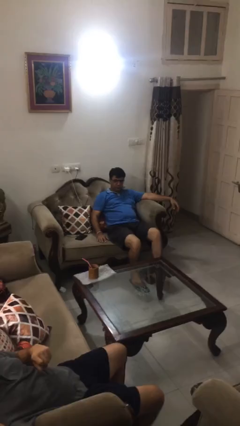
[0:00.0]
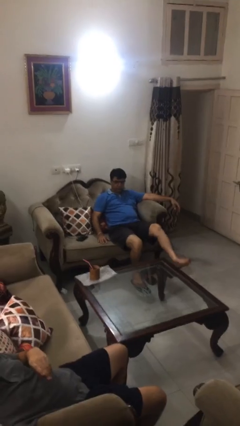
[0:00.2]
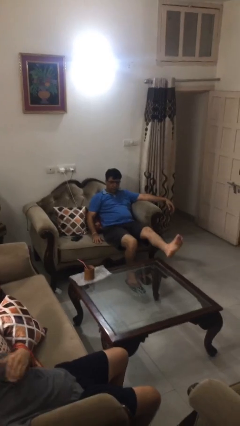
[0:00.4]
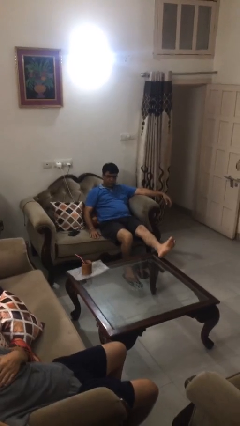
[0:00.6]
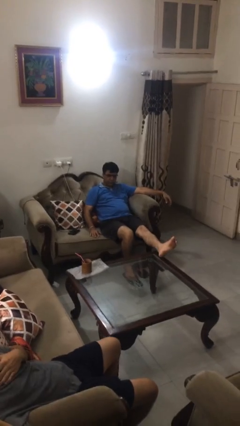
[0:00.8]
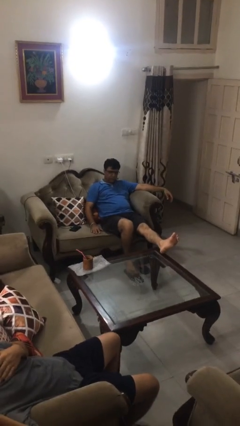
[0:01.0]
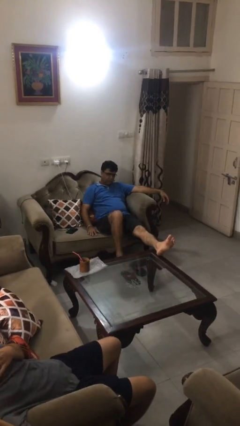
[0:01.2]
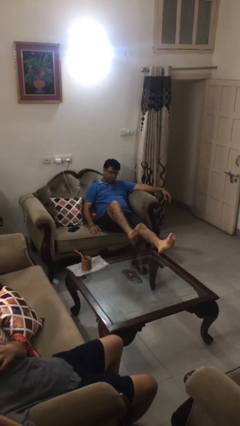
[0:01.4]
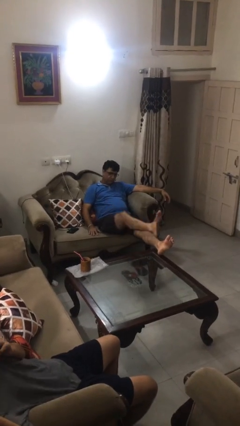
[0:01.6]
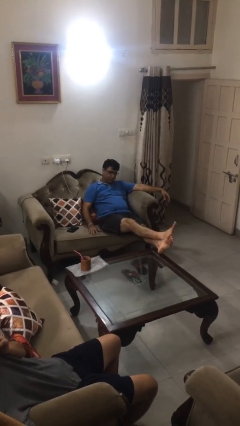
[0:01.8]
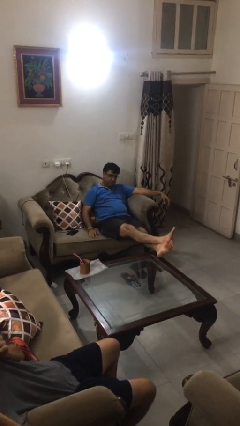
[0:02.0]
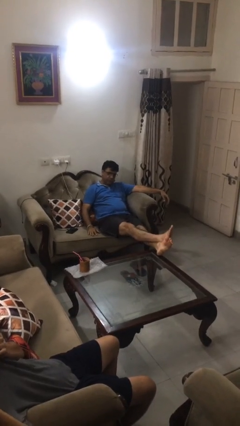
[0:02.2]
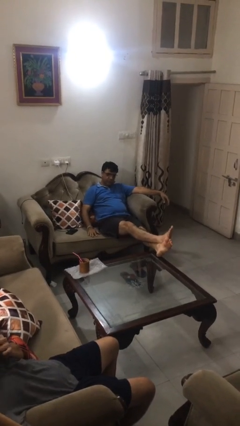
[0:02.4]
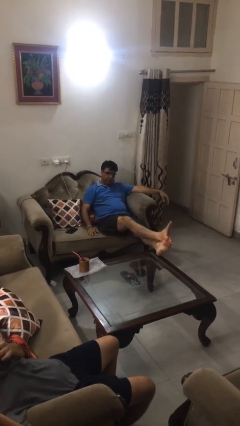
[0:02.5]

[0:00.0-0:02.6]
person puts feet up

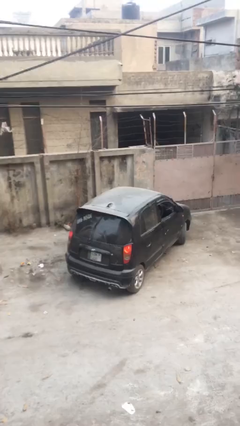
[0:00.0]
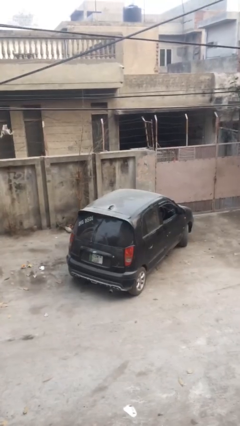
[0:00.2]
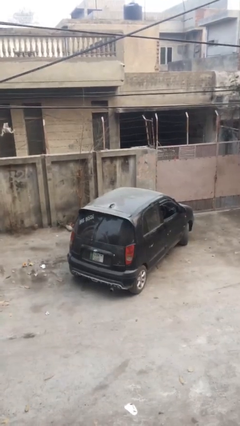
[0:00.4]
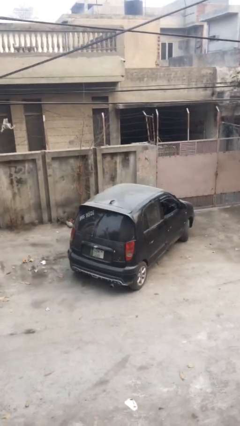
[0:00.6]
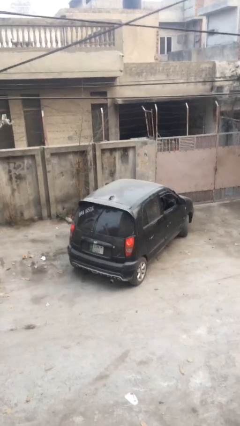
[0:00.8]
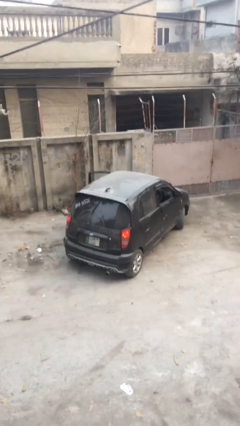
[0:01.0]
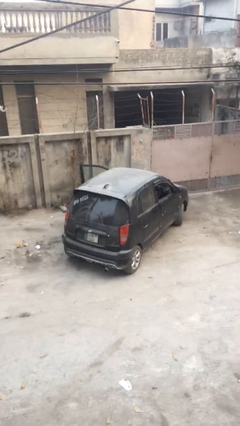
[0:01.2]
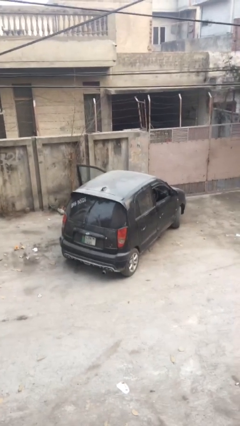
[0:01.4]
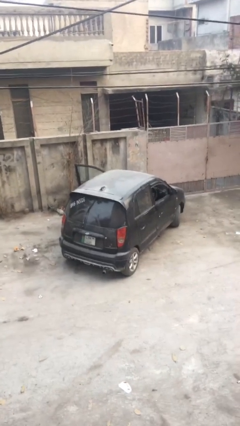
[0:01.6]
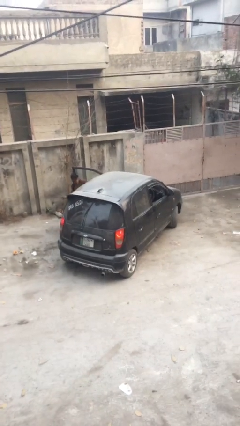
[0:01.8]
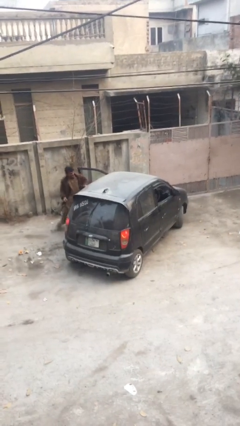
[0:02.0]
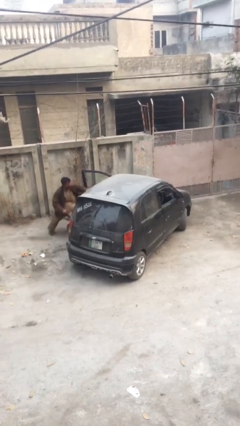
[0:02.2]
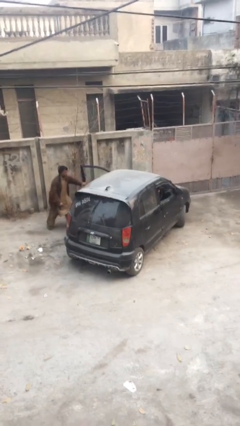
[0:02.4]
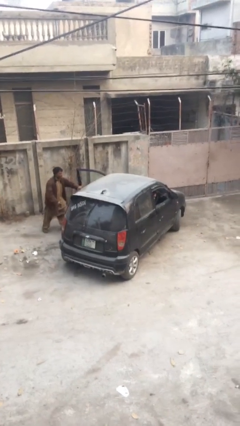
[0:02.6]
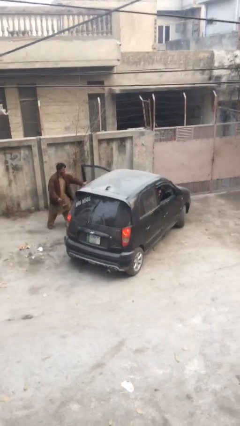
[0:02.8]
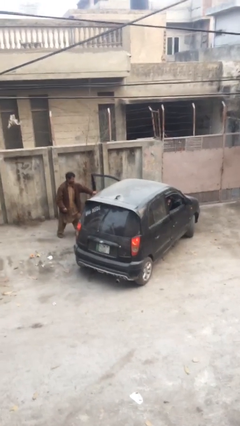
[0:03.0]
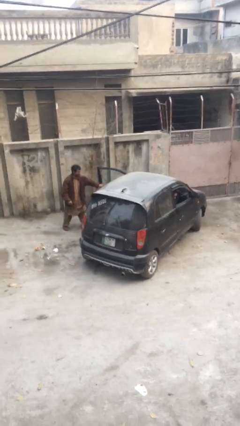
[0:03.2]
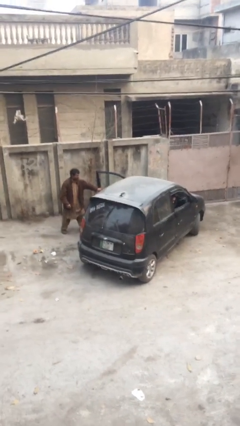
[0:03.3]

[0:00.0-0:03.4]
car drops off person

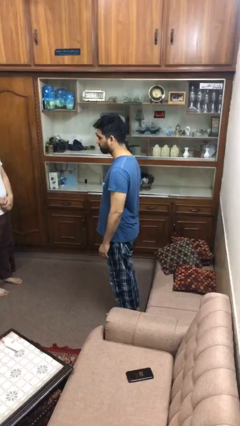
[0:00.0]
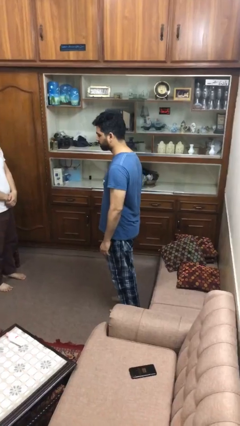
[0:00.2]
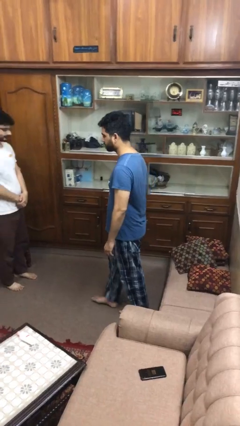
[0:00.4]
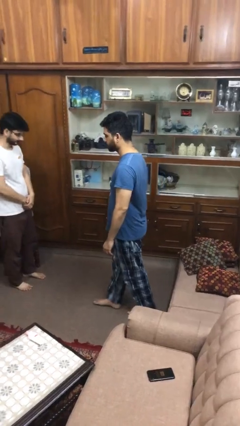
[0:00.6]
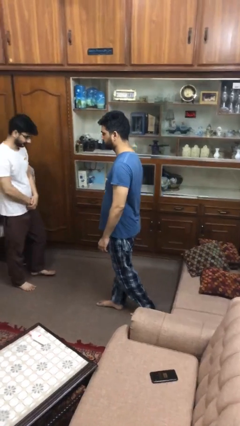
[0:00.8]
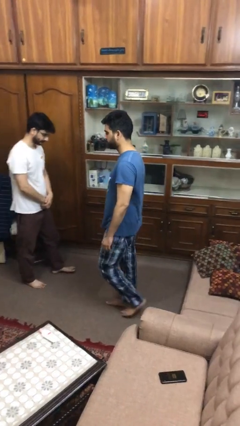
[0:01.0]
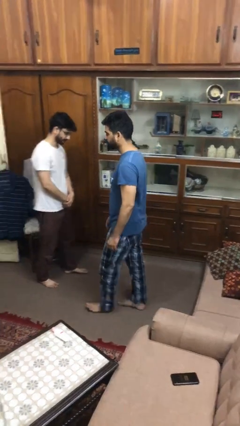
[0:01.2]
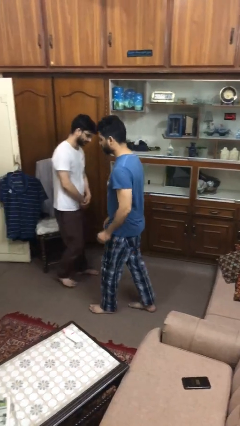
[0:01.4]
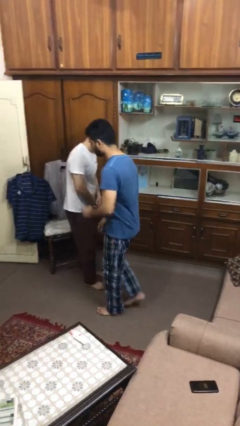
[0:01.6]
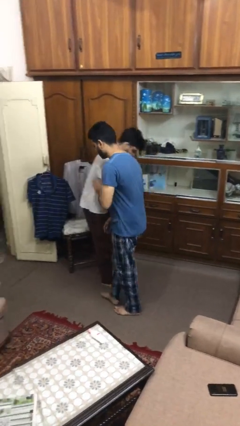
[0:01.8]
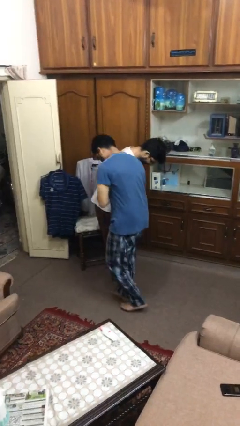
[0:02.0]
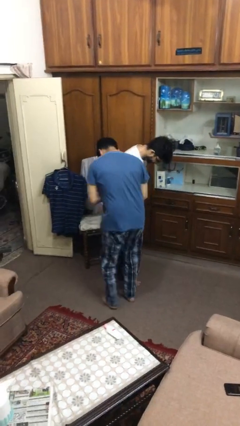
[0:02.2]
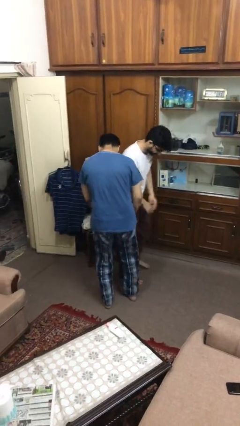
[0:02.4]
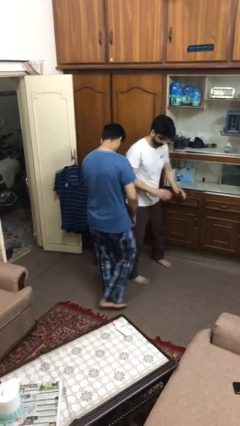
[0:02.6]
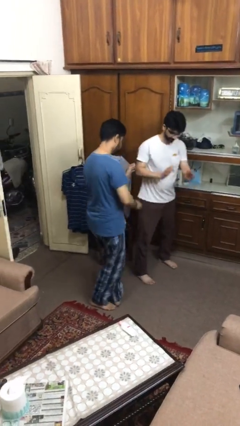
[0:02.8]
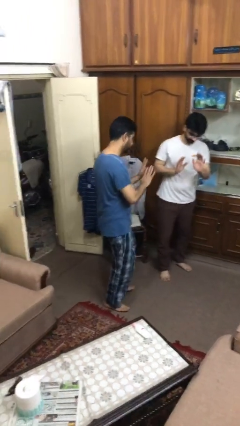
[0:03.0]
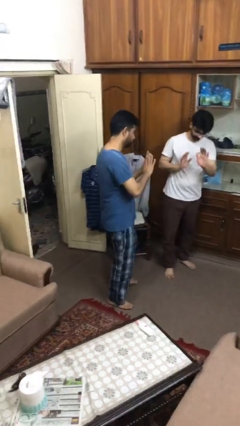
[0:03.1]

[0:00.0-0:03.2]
person bumps into person

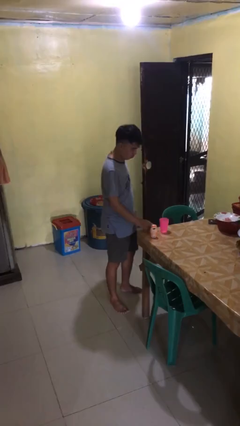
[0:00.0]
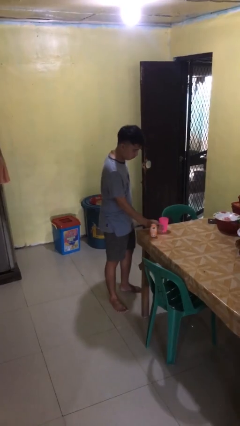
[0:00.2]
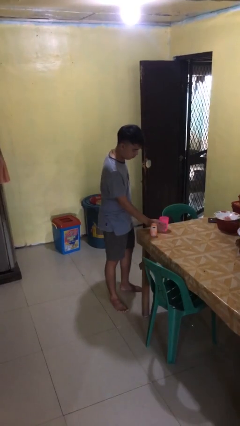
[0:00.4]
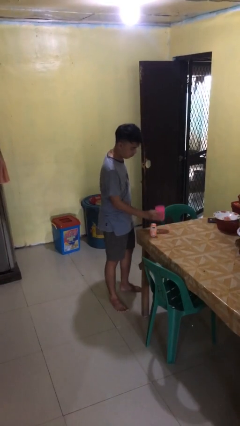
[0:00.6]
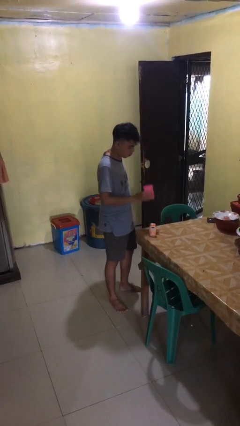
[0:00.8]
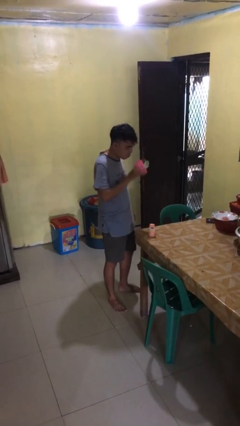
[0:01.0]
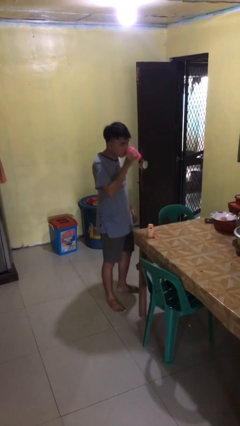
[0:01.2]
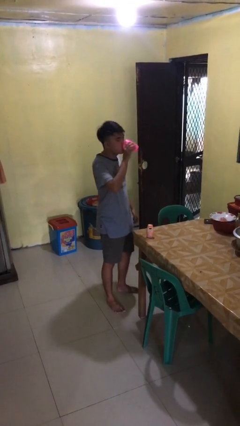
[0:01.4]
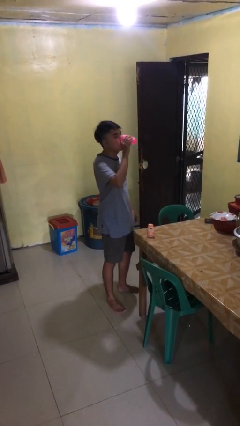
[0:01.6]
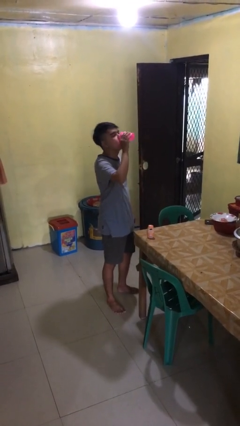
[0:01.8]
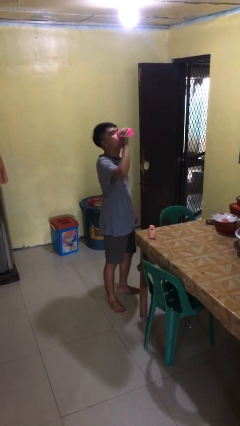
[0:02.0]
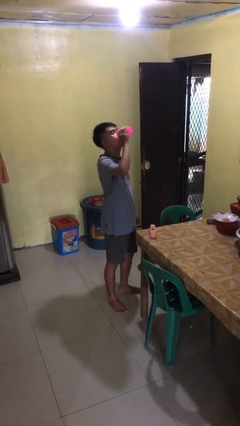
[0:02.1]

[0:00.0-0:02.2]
person drinks from cup

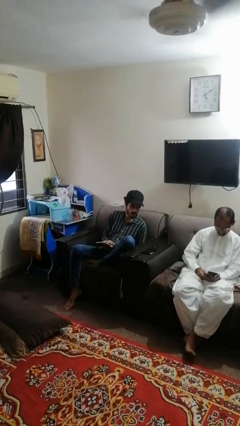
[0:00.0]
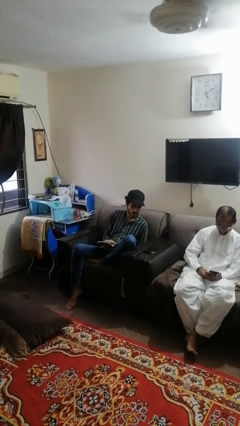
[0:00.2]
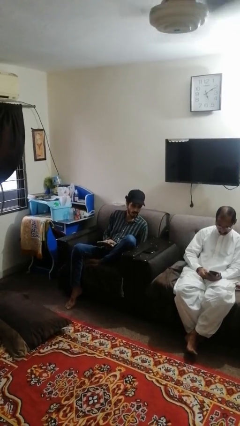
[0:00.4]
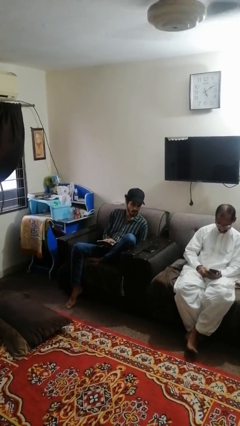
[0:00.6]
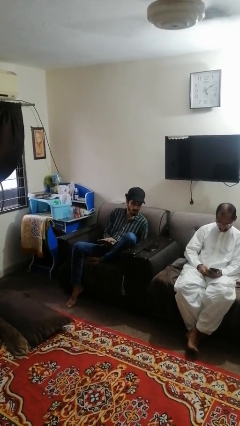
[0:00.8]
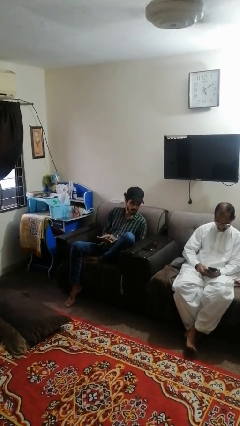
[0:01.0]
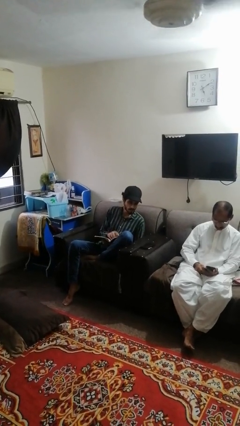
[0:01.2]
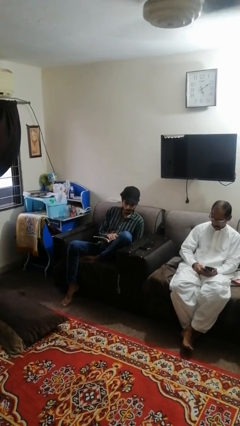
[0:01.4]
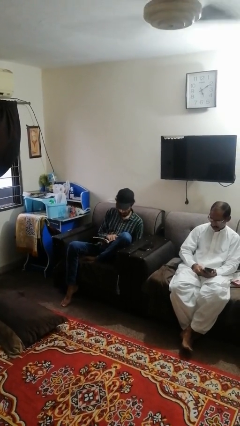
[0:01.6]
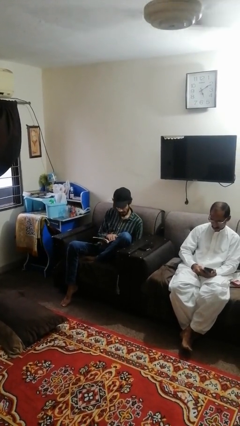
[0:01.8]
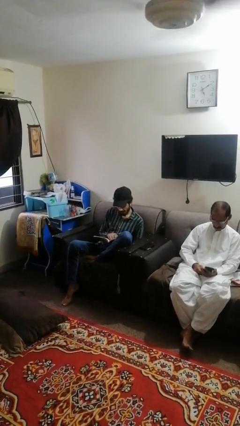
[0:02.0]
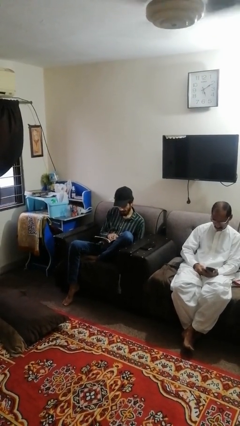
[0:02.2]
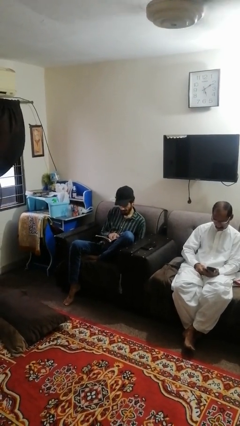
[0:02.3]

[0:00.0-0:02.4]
person reads book

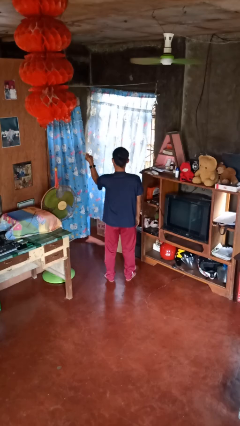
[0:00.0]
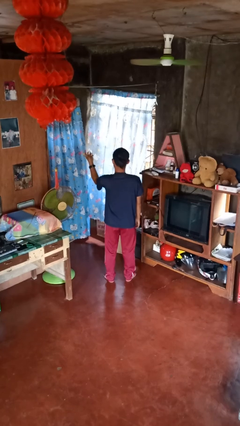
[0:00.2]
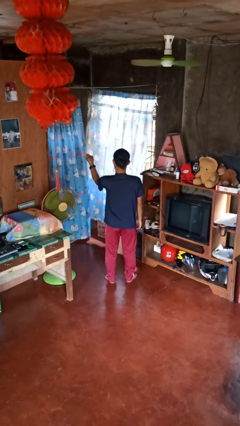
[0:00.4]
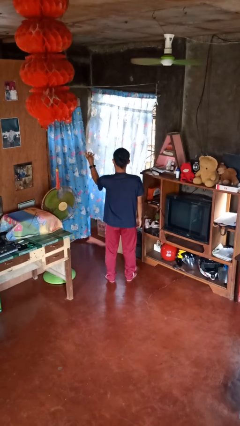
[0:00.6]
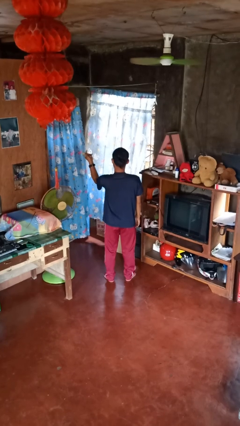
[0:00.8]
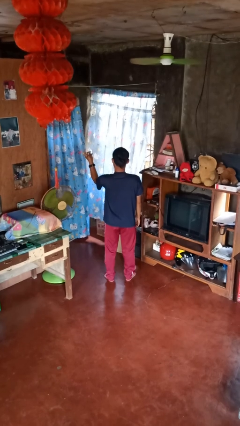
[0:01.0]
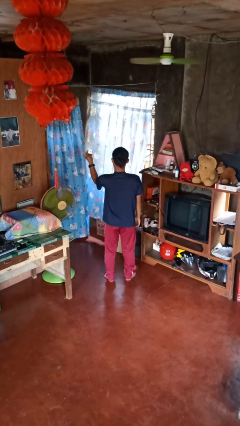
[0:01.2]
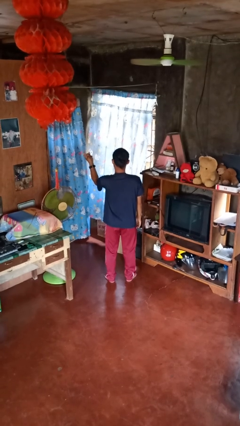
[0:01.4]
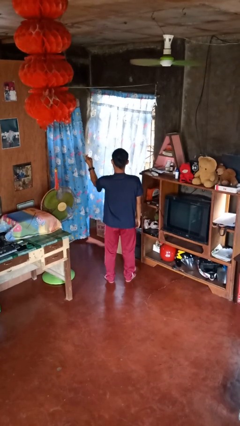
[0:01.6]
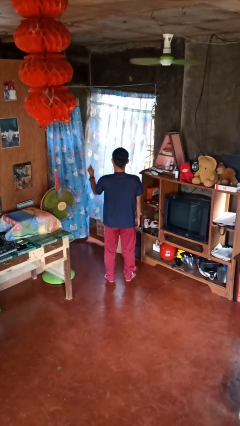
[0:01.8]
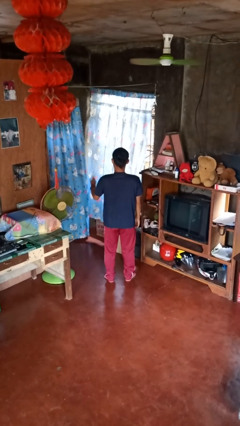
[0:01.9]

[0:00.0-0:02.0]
person snaps fingers

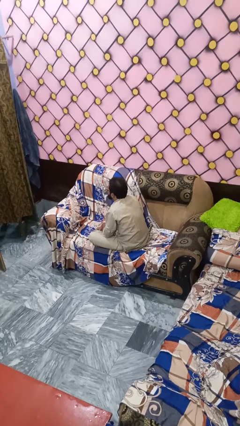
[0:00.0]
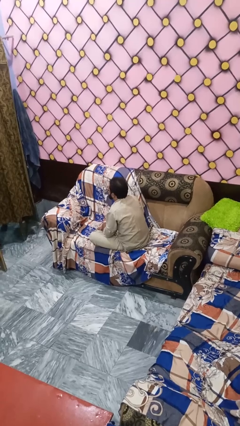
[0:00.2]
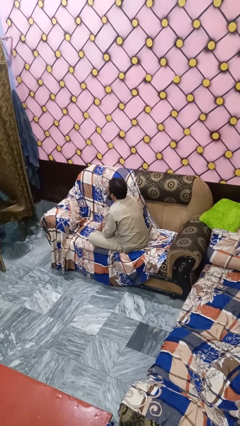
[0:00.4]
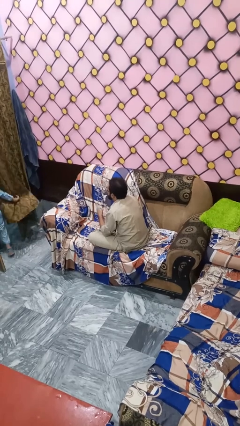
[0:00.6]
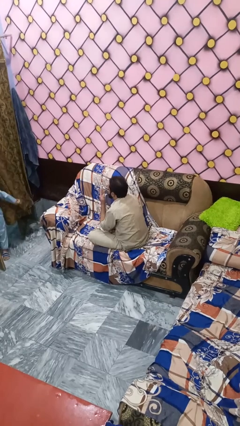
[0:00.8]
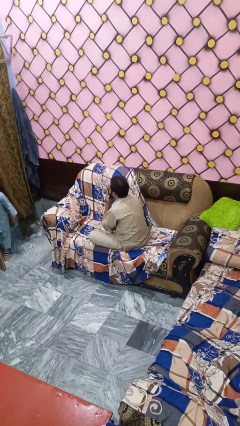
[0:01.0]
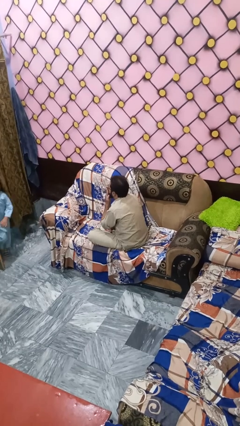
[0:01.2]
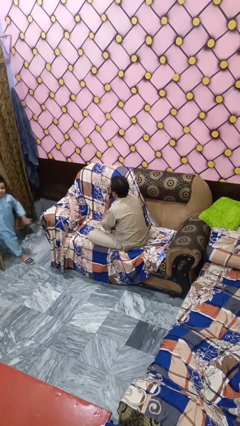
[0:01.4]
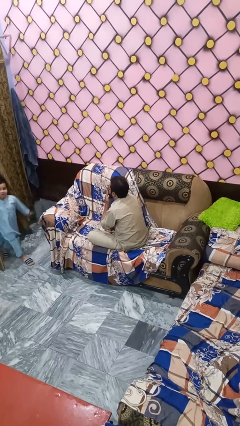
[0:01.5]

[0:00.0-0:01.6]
person gestures blow kiss
